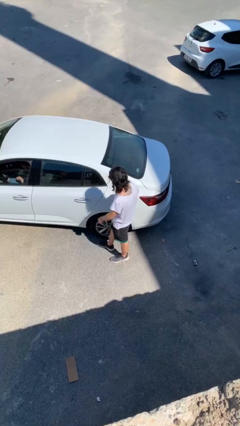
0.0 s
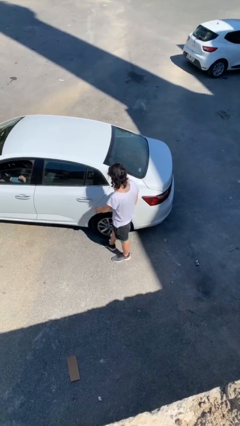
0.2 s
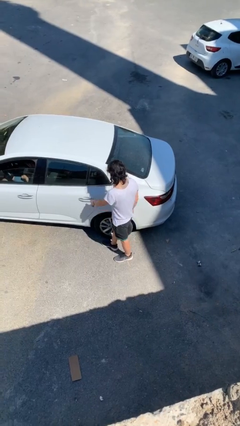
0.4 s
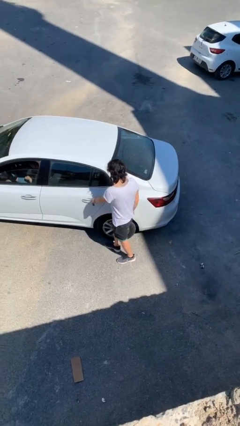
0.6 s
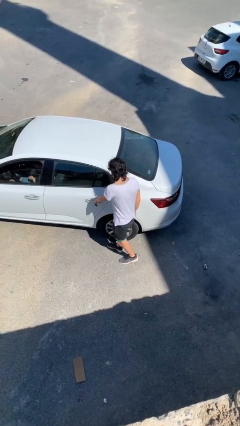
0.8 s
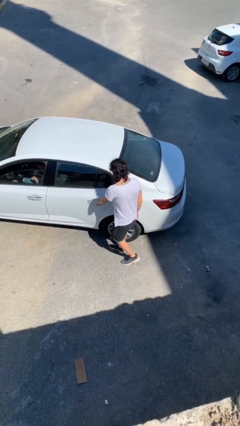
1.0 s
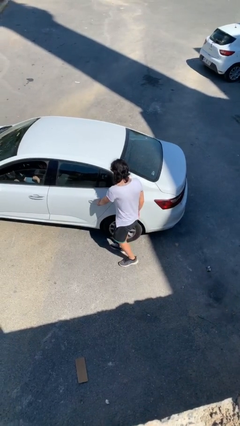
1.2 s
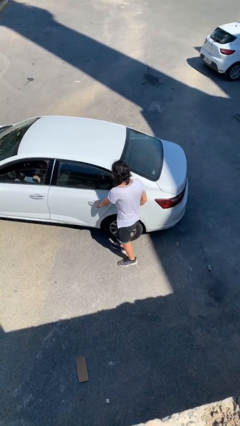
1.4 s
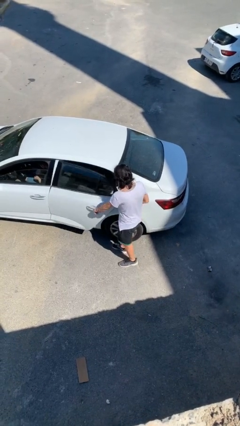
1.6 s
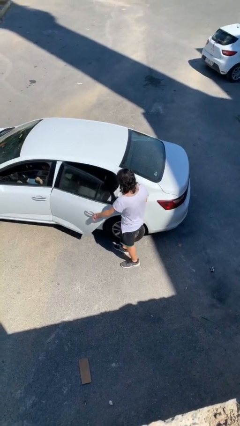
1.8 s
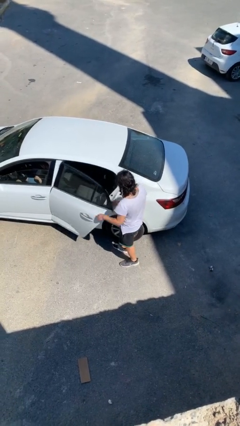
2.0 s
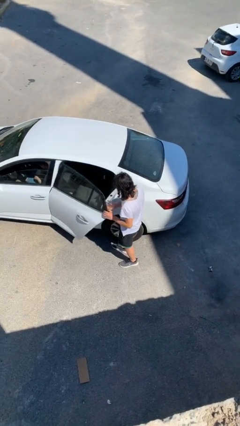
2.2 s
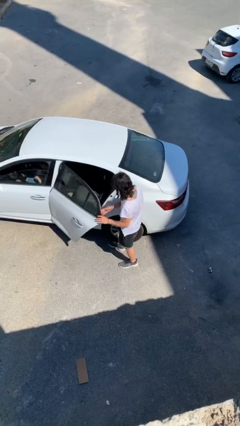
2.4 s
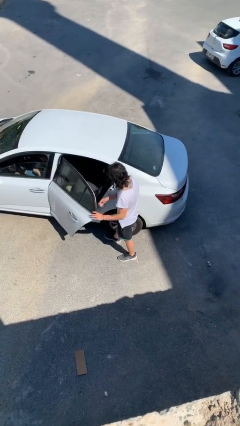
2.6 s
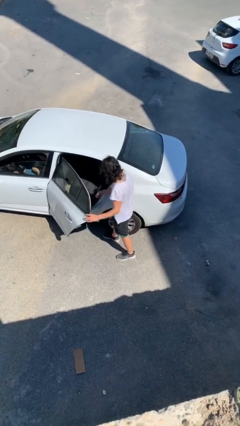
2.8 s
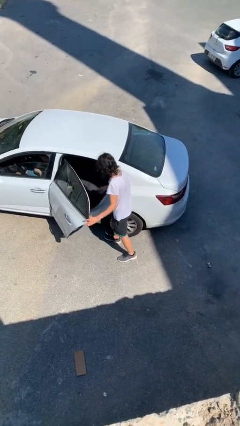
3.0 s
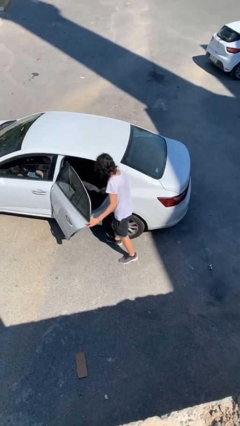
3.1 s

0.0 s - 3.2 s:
person opens car door

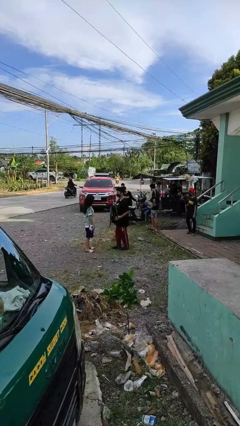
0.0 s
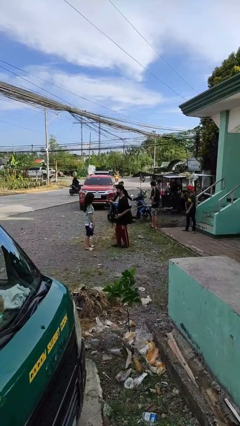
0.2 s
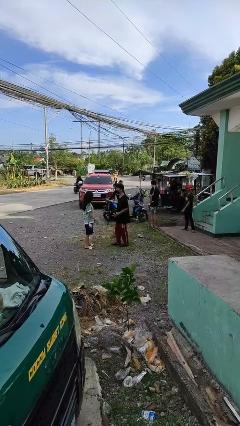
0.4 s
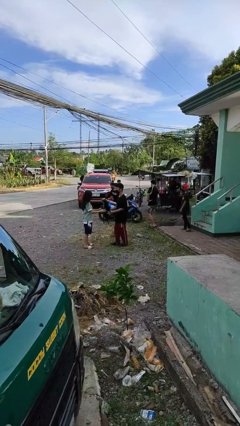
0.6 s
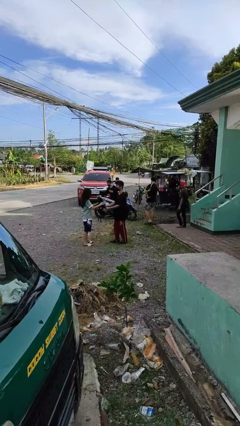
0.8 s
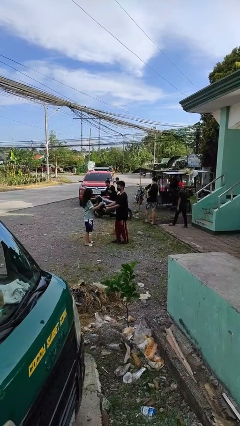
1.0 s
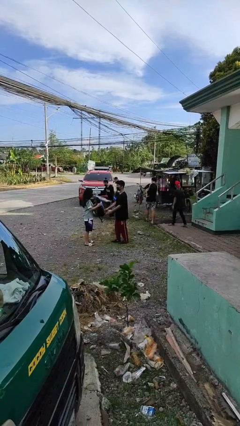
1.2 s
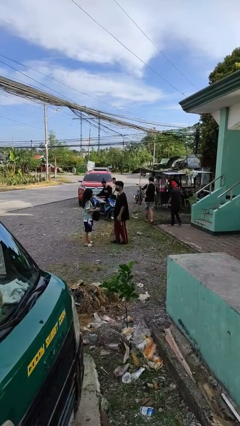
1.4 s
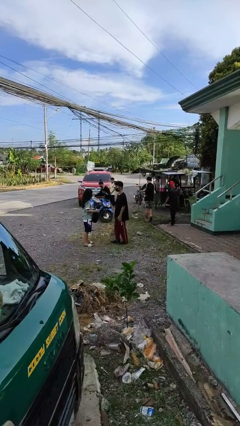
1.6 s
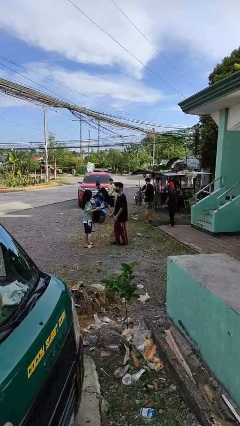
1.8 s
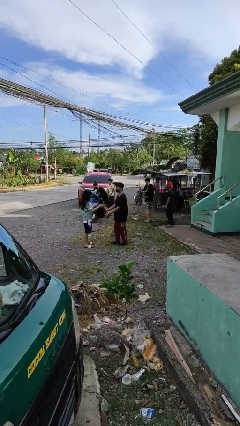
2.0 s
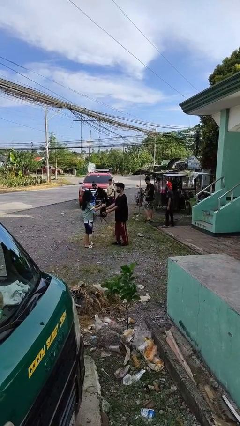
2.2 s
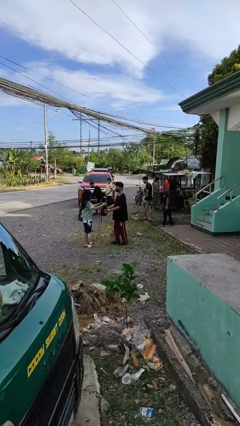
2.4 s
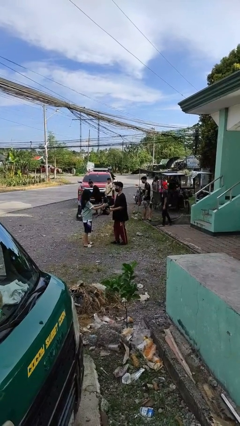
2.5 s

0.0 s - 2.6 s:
person transfers object to person

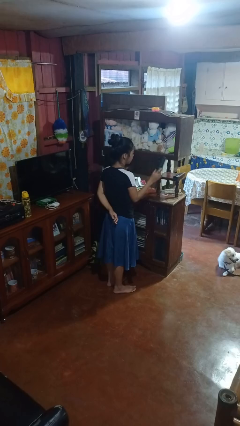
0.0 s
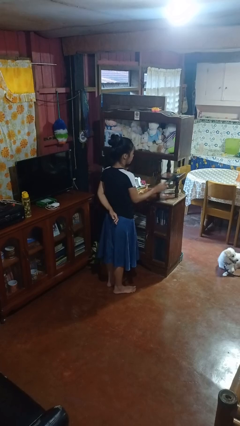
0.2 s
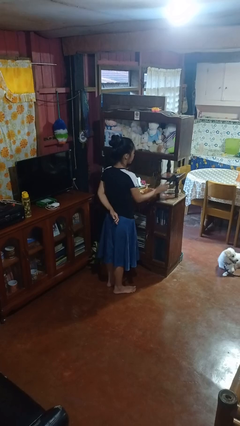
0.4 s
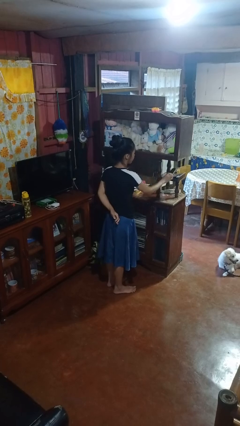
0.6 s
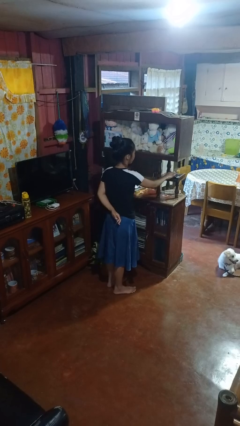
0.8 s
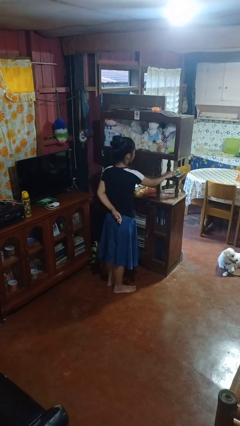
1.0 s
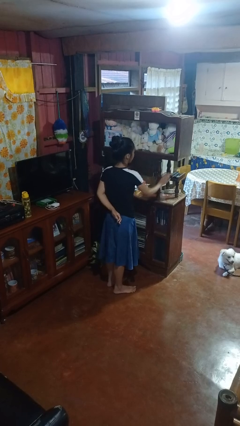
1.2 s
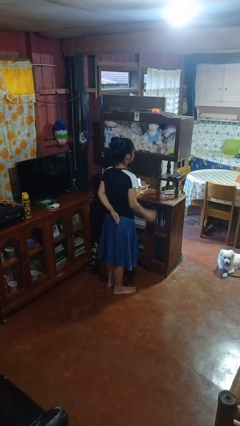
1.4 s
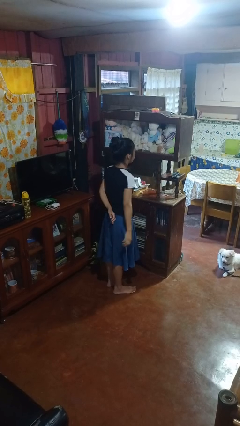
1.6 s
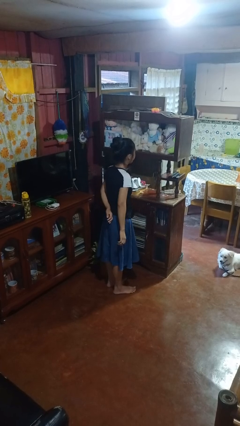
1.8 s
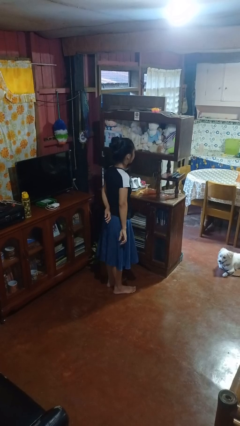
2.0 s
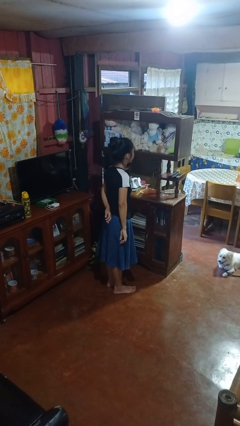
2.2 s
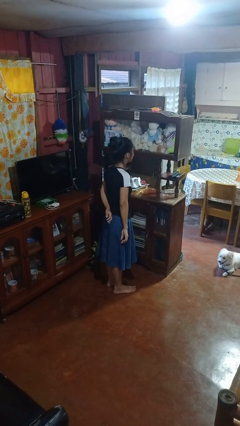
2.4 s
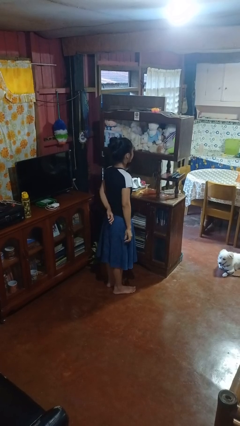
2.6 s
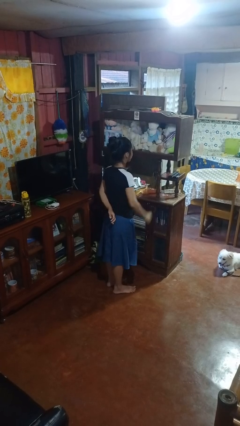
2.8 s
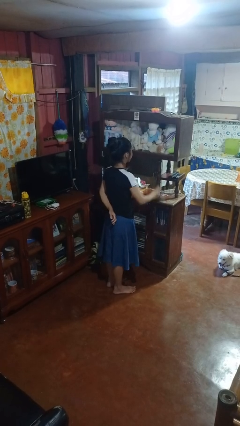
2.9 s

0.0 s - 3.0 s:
person puts down object on shelf

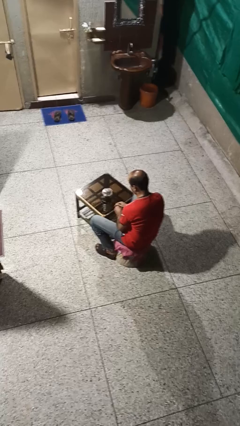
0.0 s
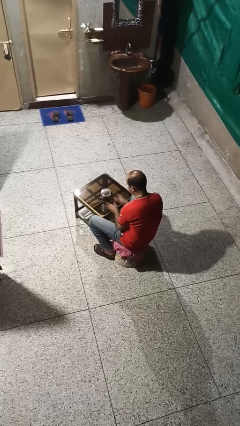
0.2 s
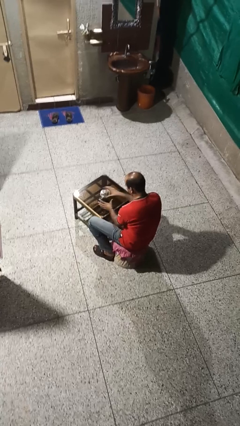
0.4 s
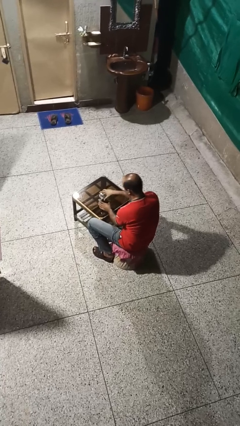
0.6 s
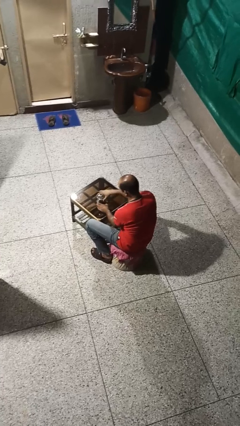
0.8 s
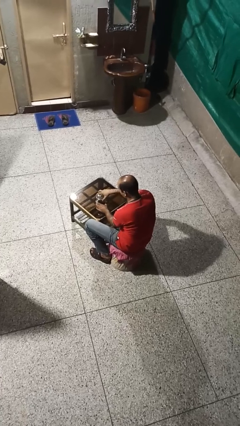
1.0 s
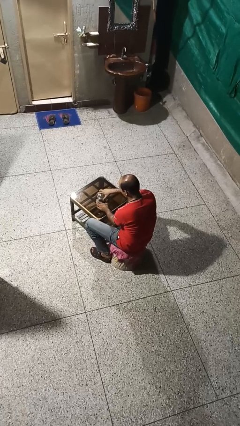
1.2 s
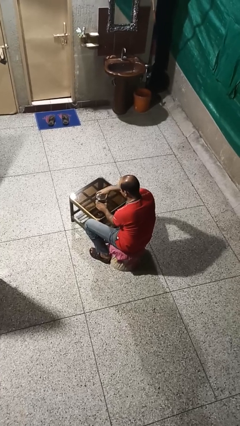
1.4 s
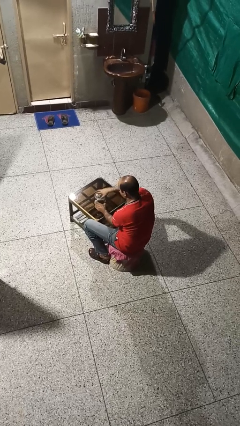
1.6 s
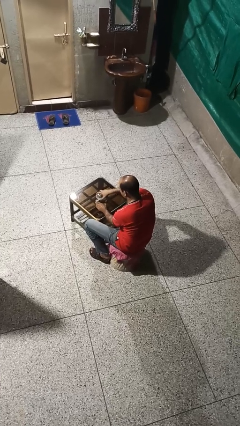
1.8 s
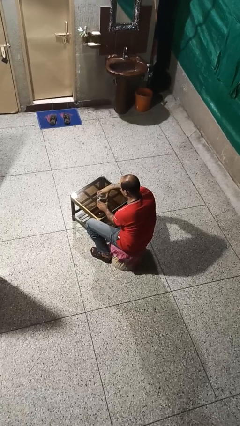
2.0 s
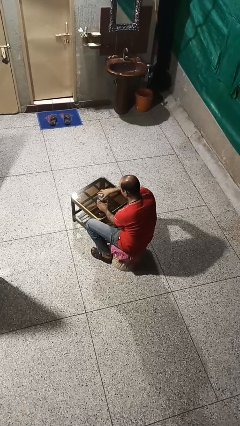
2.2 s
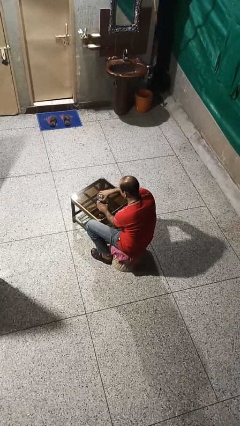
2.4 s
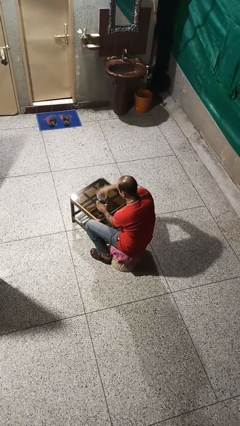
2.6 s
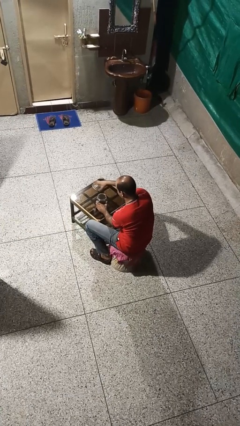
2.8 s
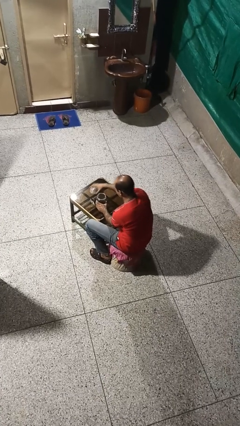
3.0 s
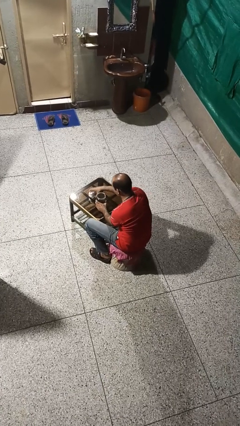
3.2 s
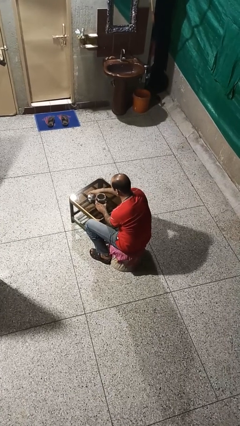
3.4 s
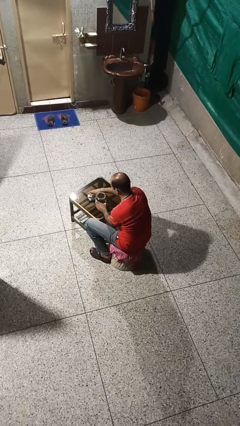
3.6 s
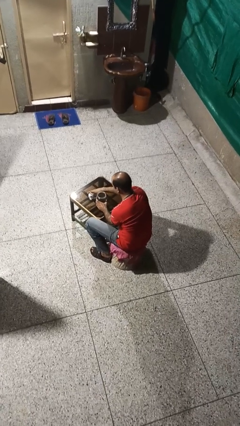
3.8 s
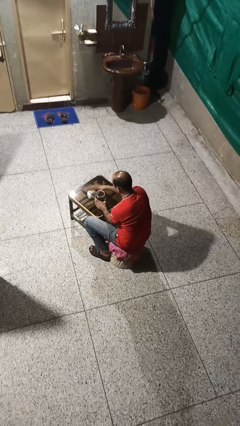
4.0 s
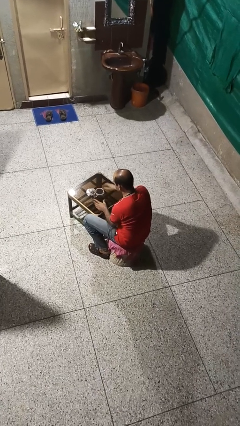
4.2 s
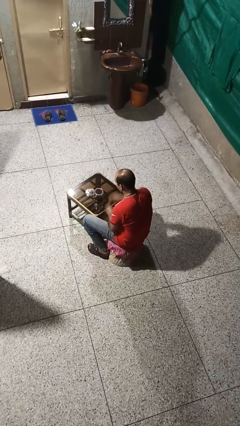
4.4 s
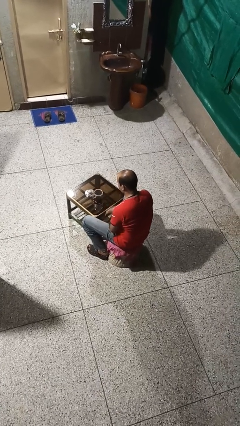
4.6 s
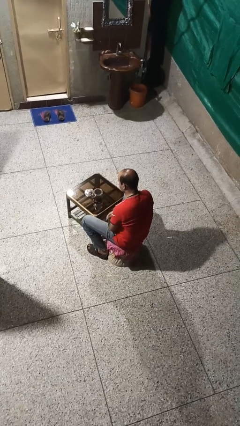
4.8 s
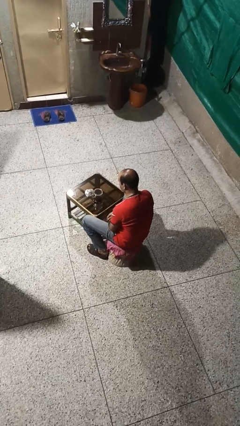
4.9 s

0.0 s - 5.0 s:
person opens jar

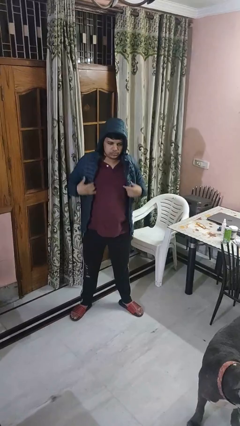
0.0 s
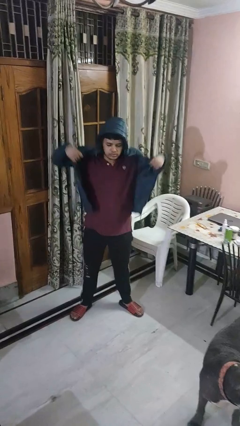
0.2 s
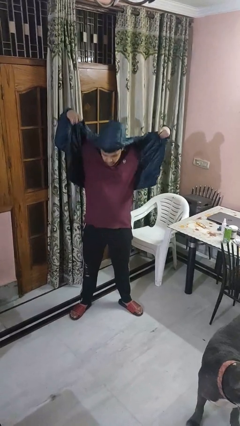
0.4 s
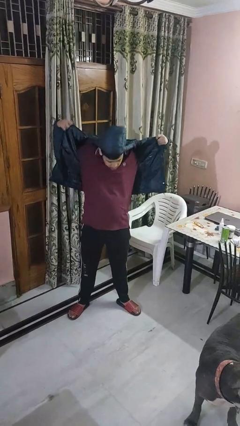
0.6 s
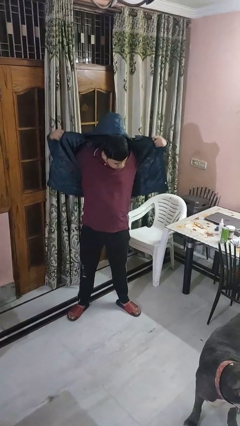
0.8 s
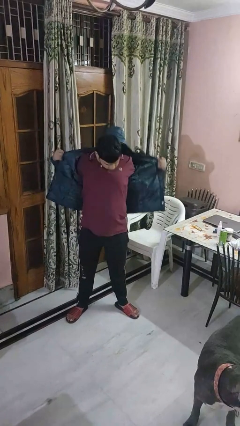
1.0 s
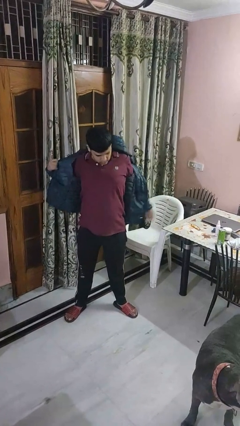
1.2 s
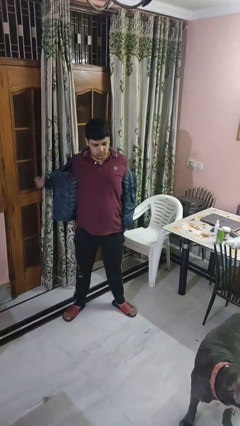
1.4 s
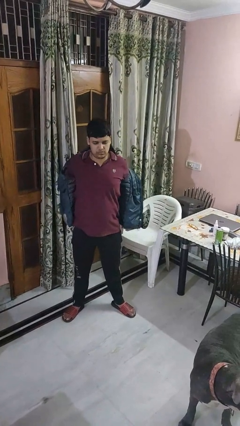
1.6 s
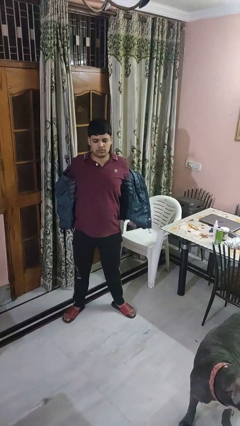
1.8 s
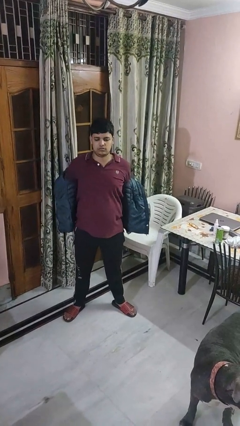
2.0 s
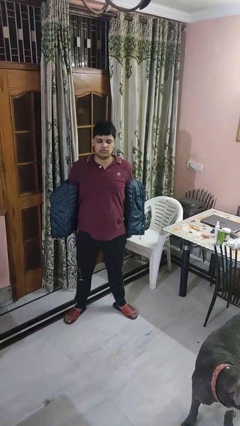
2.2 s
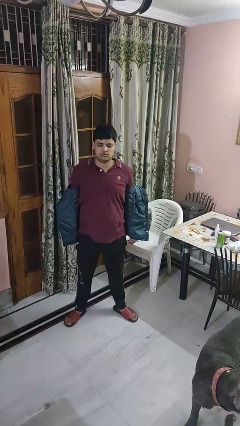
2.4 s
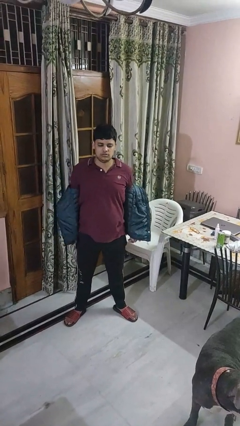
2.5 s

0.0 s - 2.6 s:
person takes off hoodie

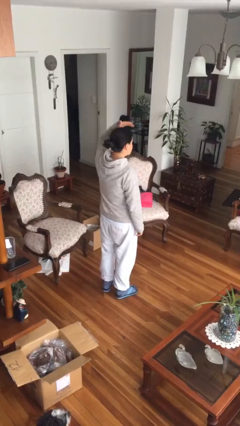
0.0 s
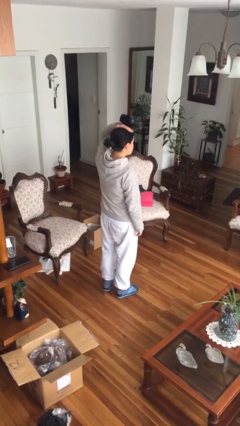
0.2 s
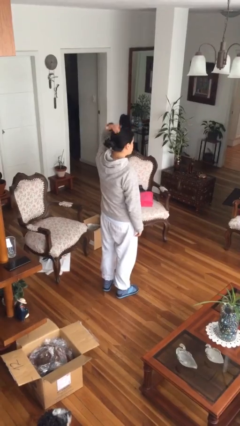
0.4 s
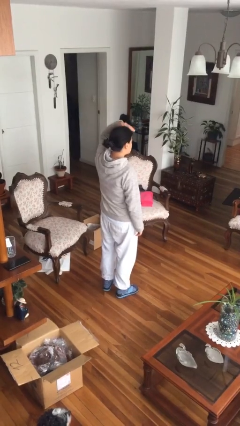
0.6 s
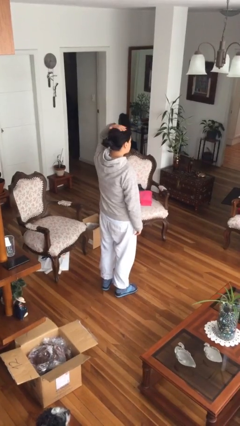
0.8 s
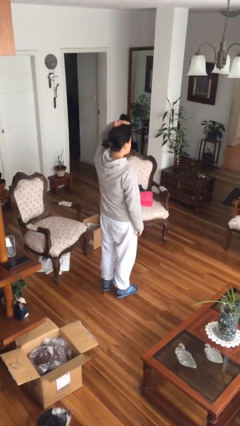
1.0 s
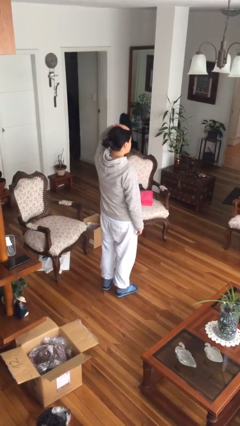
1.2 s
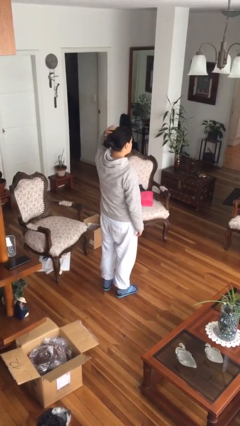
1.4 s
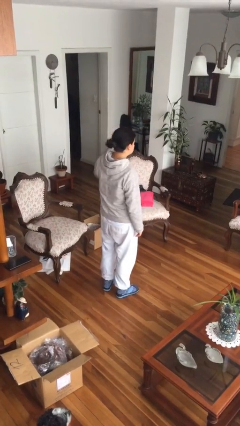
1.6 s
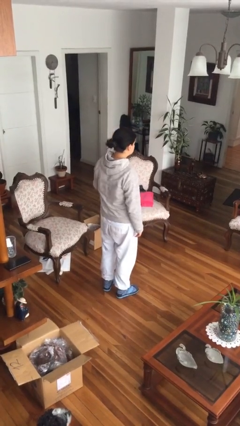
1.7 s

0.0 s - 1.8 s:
person pats head
